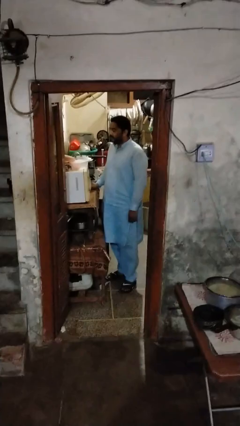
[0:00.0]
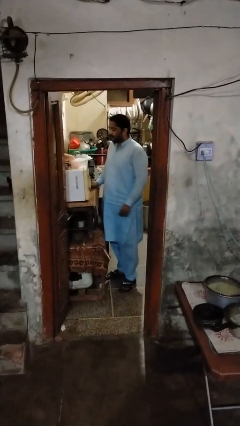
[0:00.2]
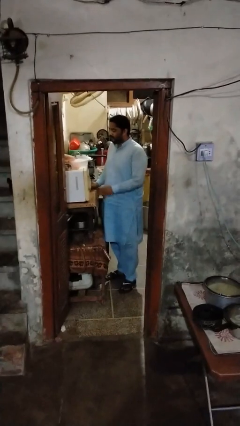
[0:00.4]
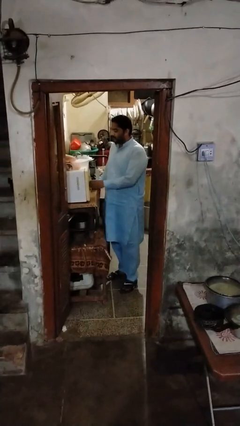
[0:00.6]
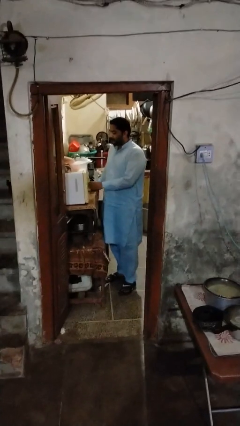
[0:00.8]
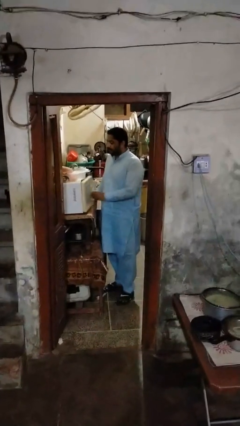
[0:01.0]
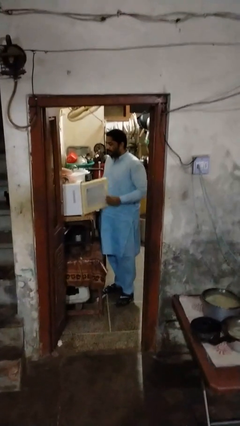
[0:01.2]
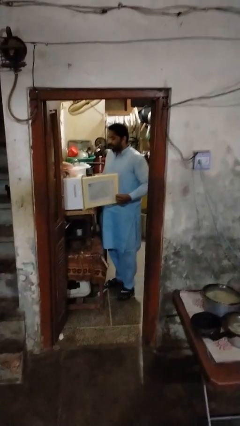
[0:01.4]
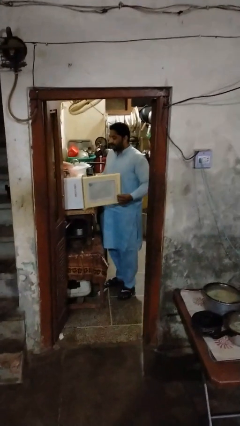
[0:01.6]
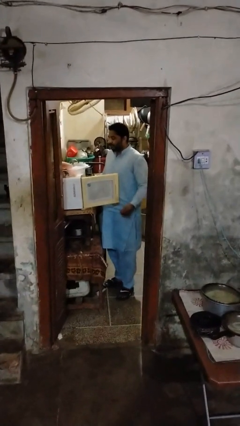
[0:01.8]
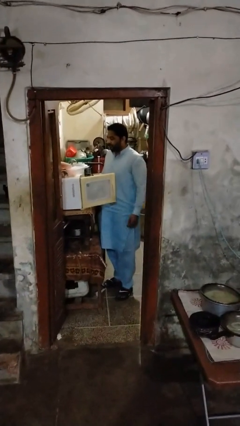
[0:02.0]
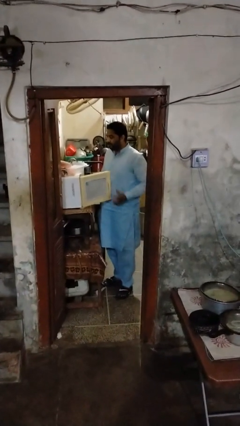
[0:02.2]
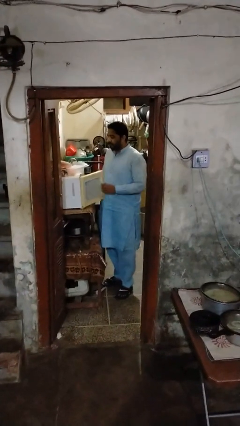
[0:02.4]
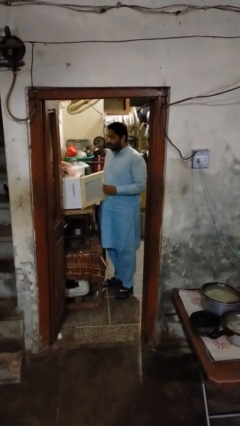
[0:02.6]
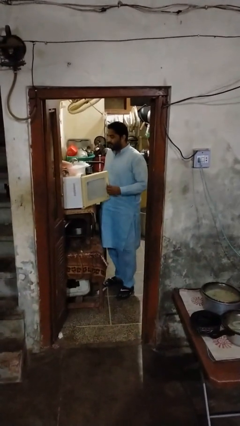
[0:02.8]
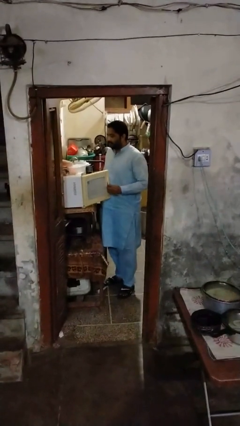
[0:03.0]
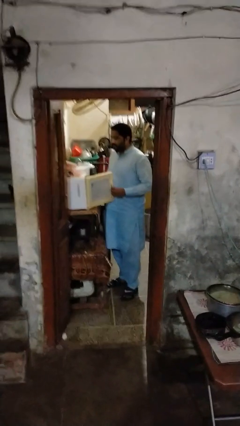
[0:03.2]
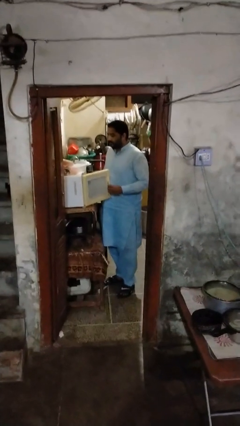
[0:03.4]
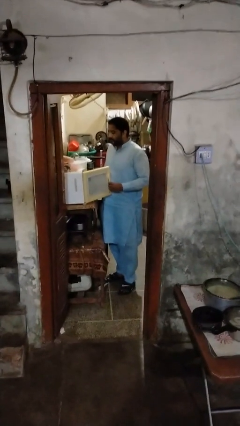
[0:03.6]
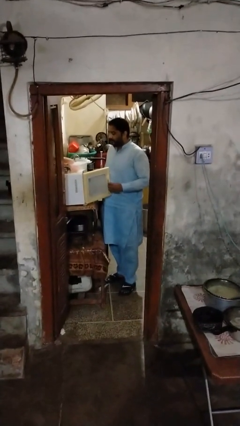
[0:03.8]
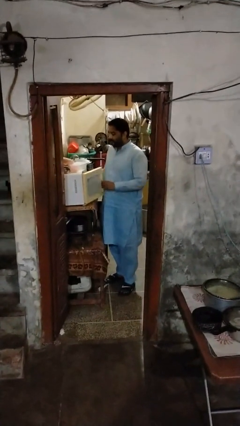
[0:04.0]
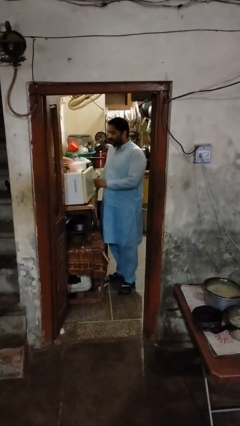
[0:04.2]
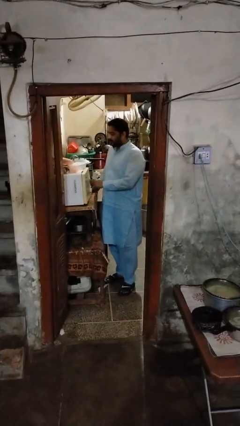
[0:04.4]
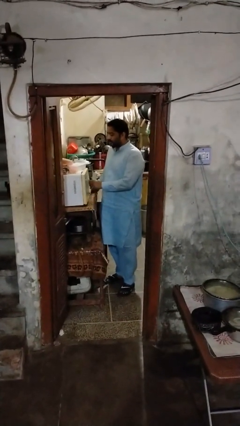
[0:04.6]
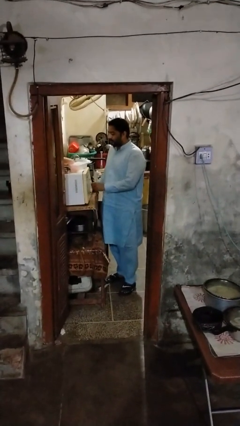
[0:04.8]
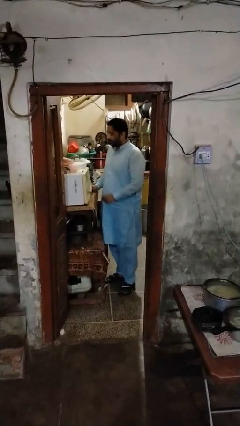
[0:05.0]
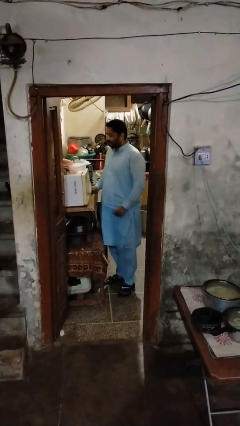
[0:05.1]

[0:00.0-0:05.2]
person falls from bed

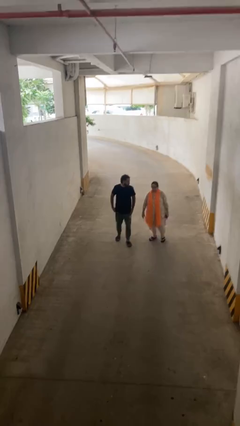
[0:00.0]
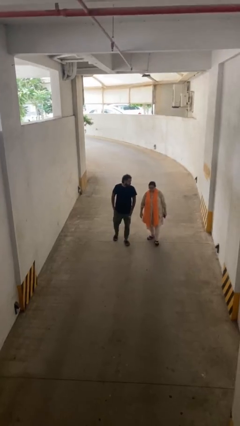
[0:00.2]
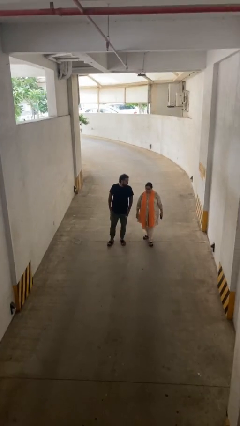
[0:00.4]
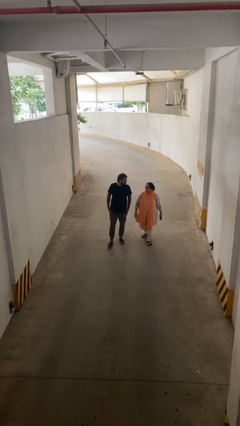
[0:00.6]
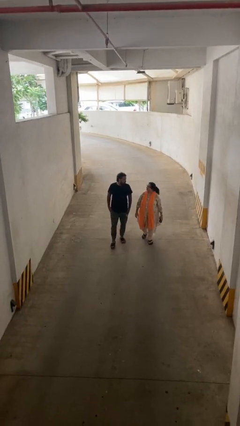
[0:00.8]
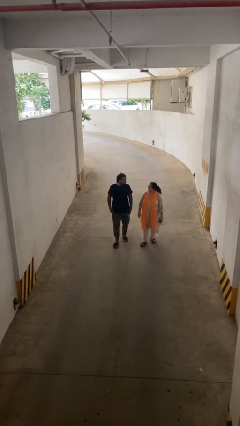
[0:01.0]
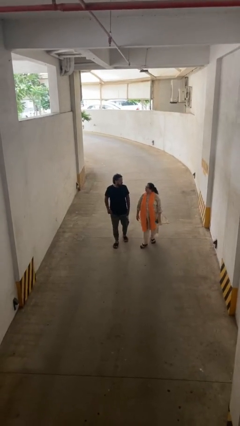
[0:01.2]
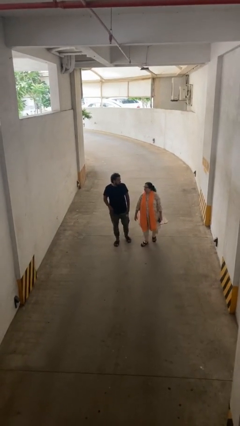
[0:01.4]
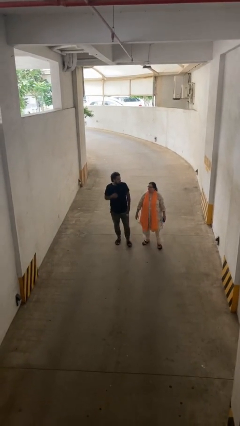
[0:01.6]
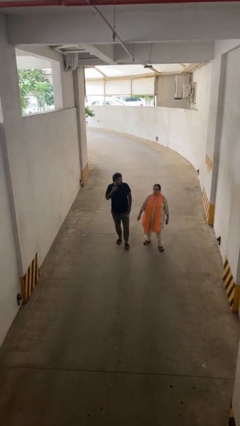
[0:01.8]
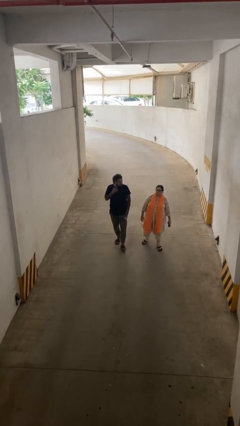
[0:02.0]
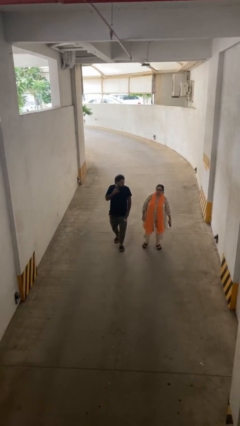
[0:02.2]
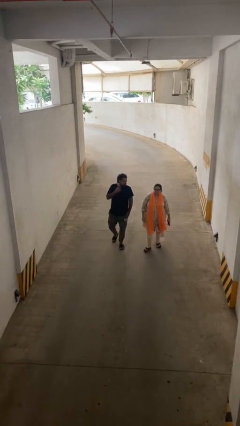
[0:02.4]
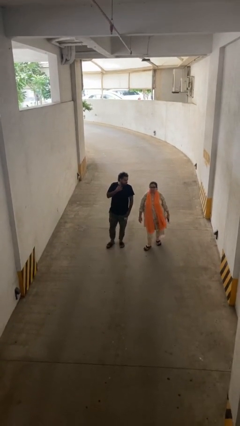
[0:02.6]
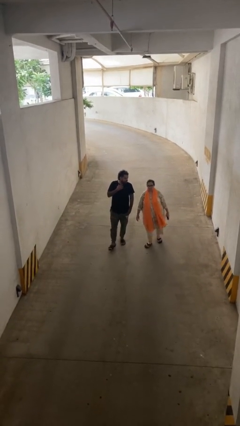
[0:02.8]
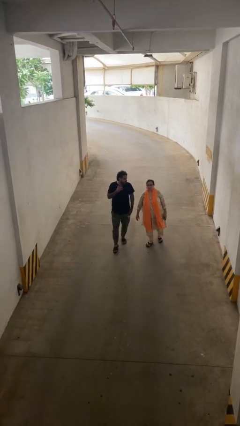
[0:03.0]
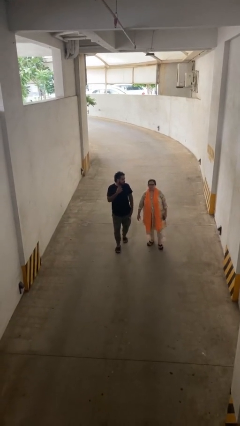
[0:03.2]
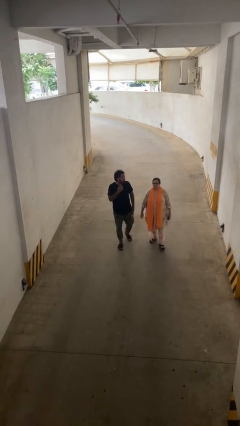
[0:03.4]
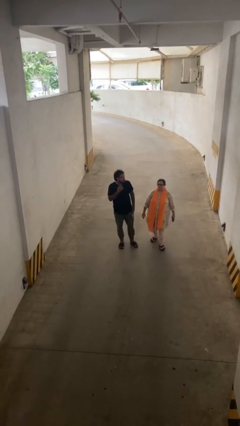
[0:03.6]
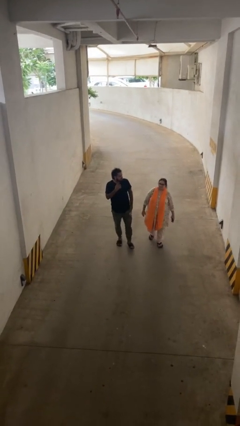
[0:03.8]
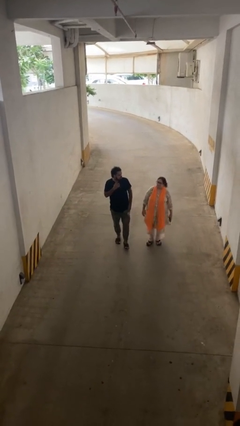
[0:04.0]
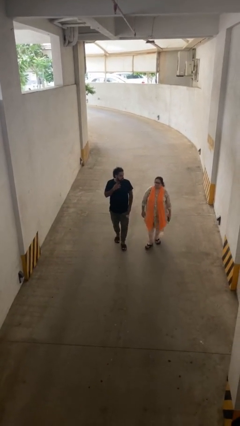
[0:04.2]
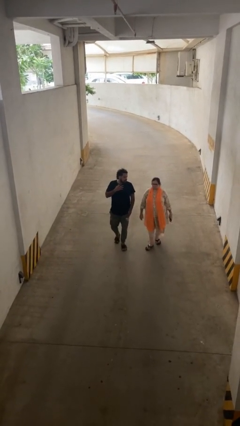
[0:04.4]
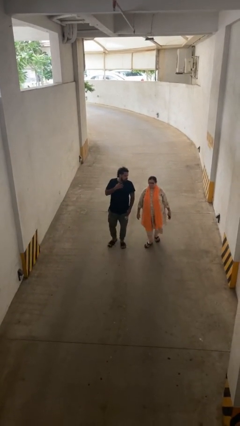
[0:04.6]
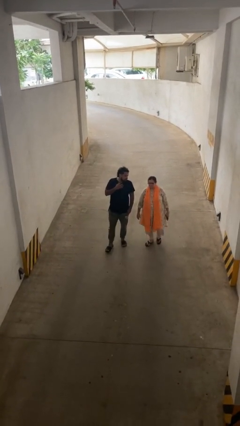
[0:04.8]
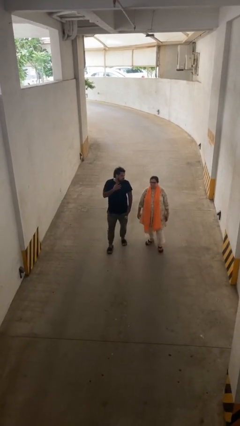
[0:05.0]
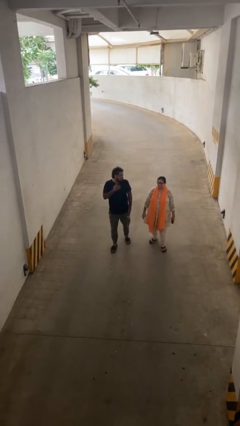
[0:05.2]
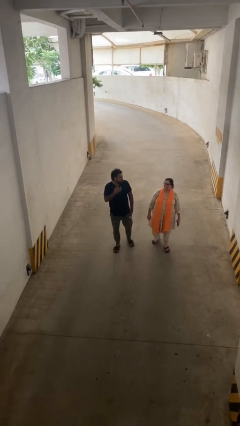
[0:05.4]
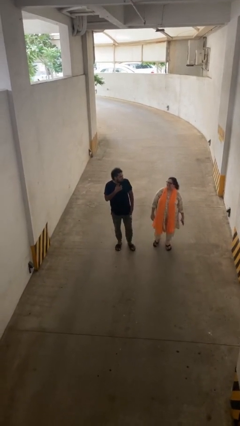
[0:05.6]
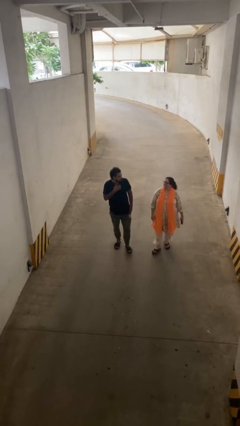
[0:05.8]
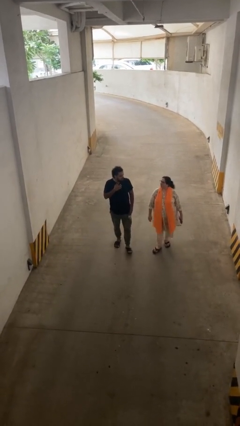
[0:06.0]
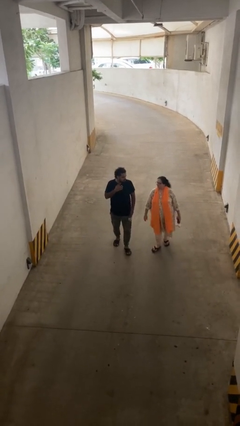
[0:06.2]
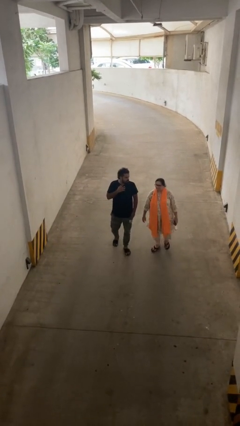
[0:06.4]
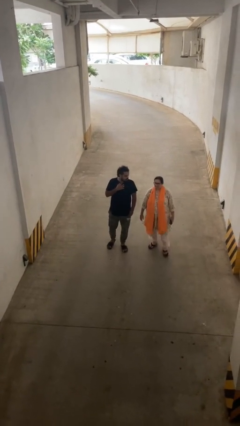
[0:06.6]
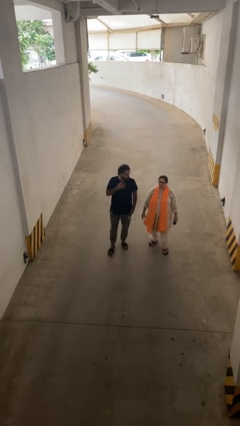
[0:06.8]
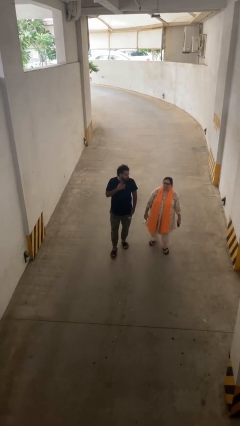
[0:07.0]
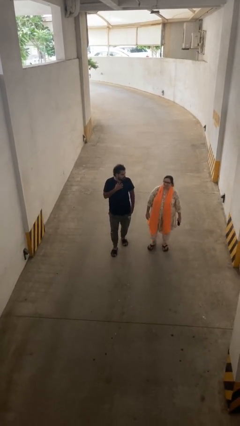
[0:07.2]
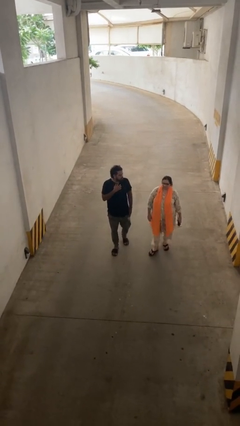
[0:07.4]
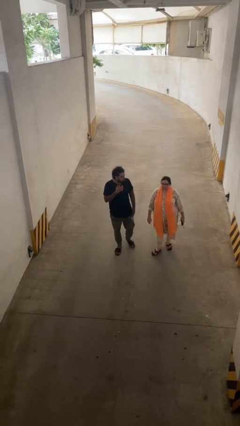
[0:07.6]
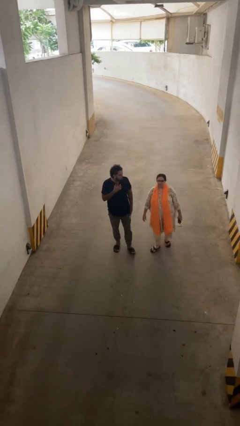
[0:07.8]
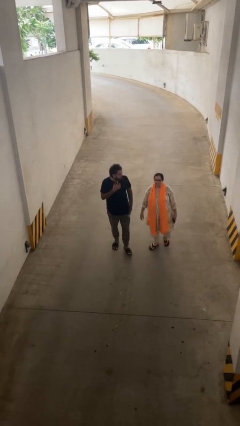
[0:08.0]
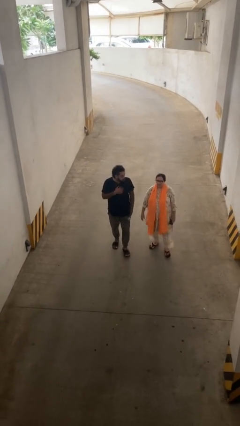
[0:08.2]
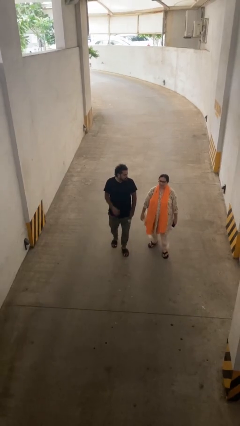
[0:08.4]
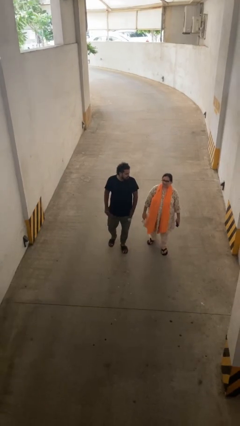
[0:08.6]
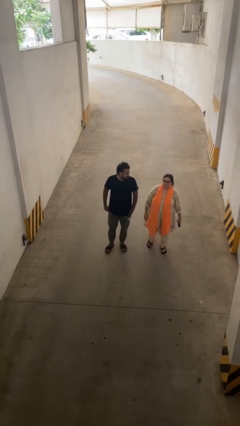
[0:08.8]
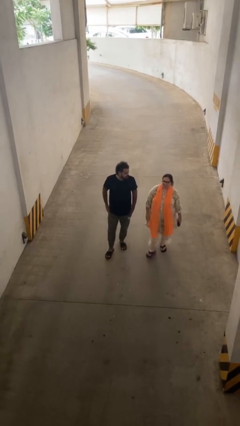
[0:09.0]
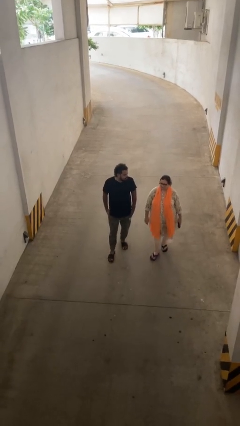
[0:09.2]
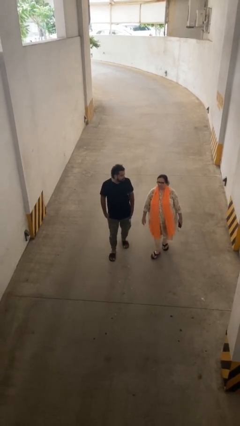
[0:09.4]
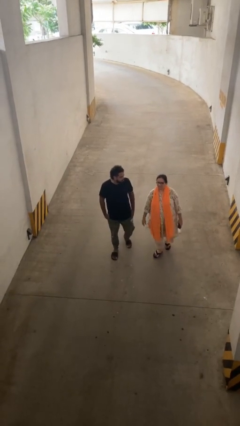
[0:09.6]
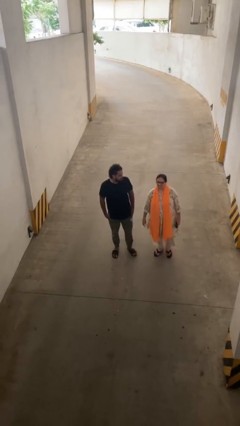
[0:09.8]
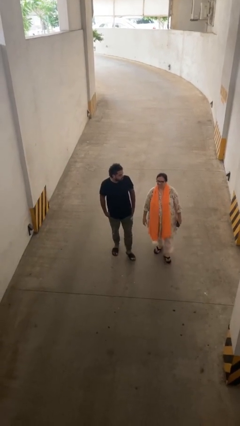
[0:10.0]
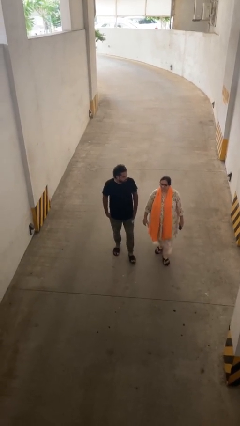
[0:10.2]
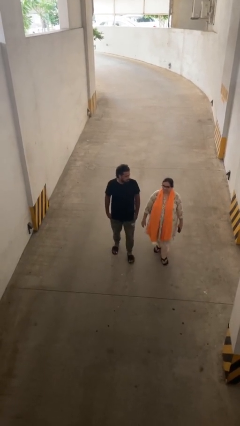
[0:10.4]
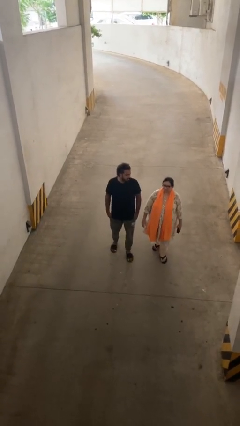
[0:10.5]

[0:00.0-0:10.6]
person talks to person

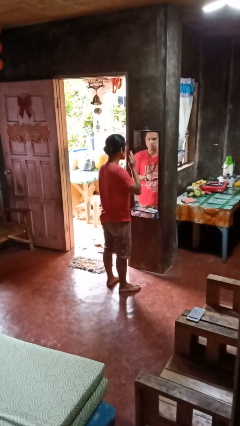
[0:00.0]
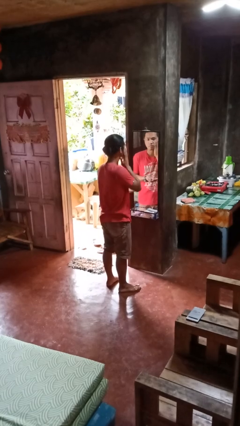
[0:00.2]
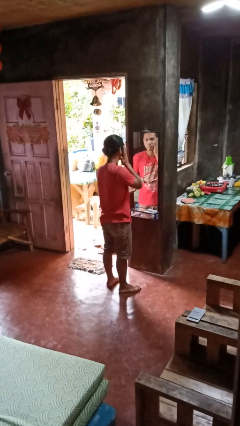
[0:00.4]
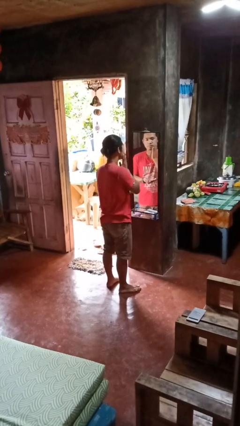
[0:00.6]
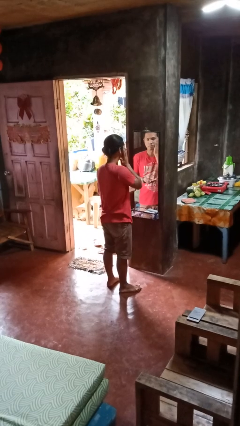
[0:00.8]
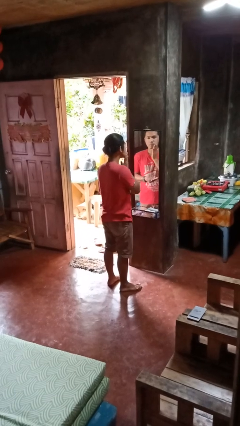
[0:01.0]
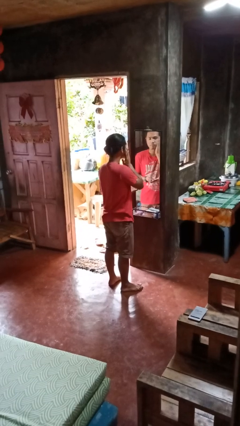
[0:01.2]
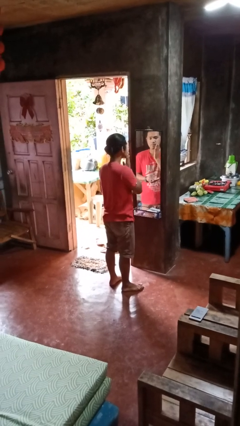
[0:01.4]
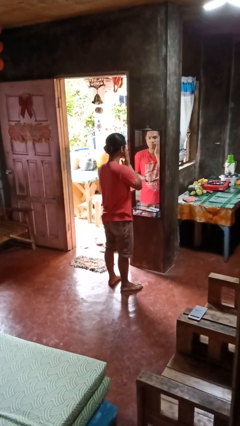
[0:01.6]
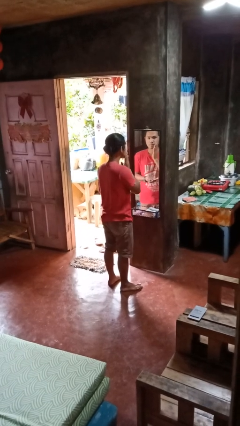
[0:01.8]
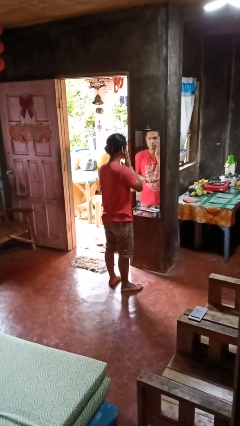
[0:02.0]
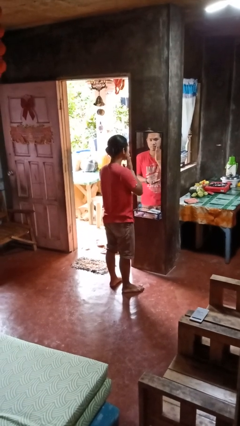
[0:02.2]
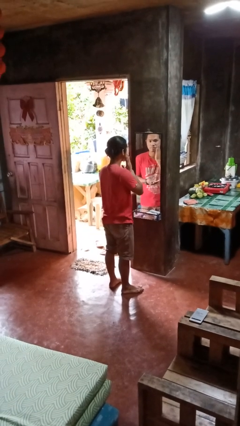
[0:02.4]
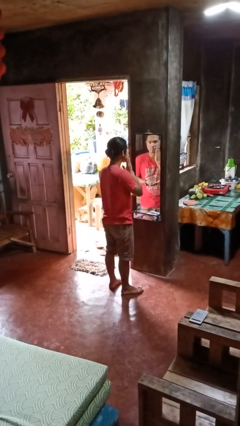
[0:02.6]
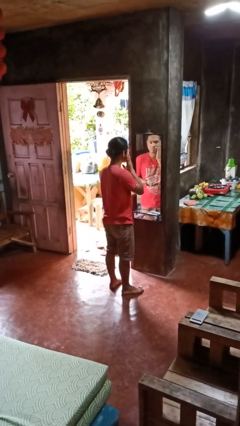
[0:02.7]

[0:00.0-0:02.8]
person applies foundation makeup
